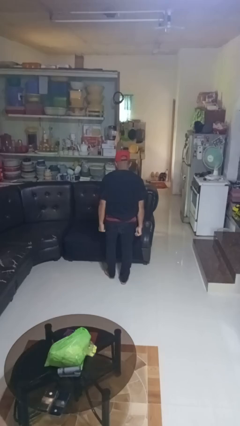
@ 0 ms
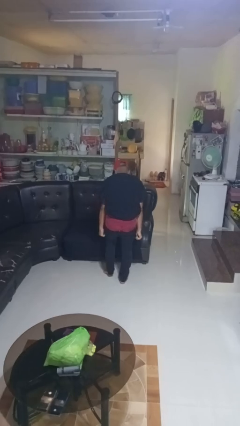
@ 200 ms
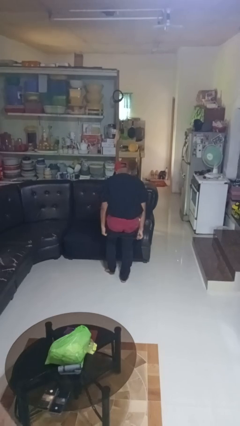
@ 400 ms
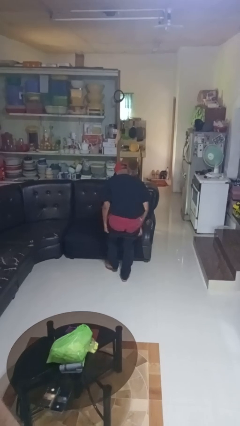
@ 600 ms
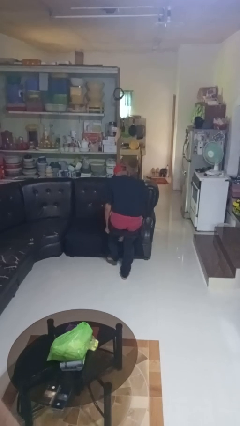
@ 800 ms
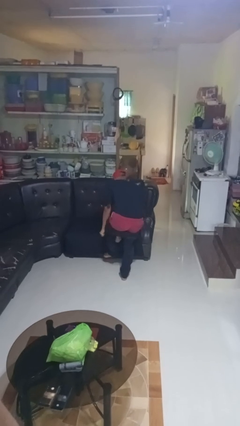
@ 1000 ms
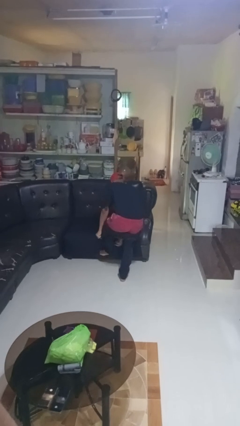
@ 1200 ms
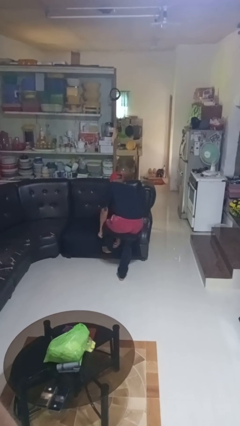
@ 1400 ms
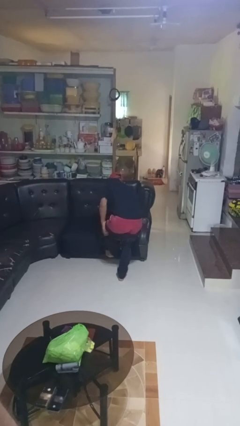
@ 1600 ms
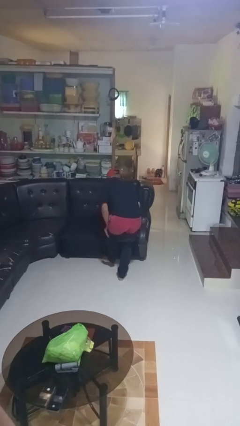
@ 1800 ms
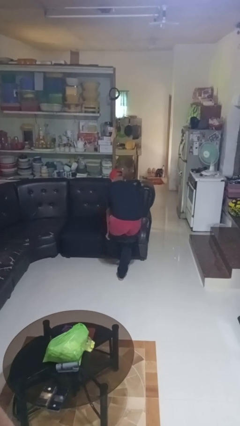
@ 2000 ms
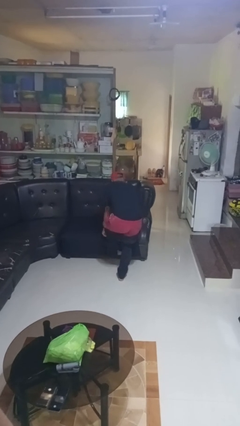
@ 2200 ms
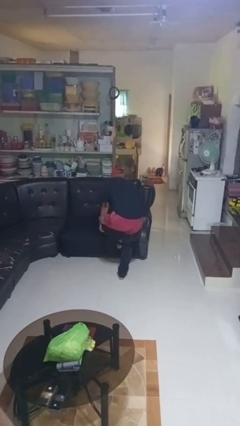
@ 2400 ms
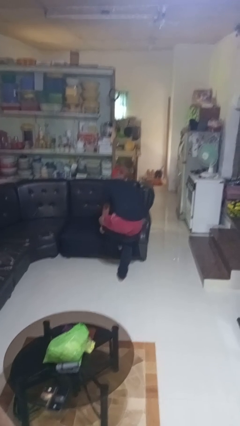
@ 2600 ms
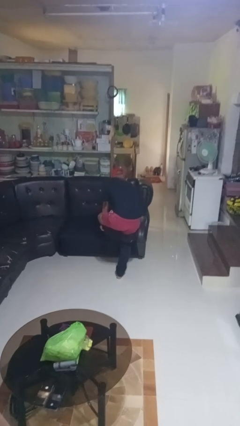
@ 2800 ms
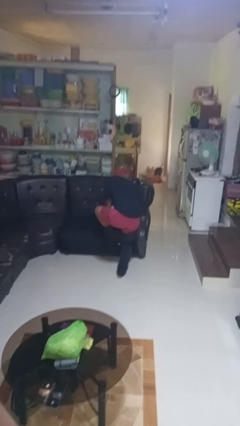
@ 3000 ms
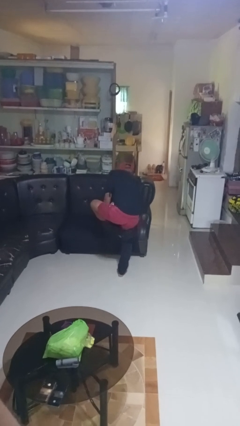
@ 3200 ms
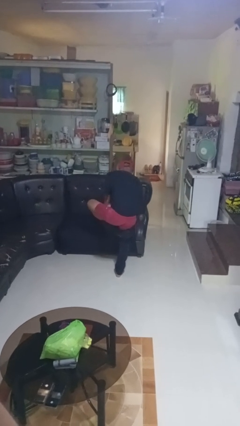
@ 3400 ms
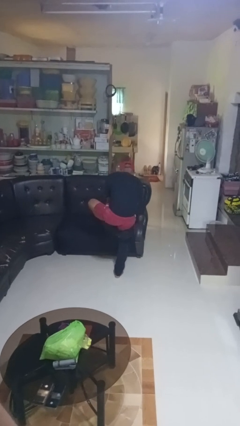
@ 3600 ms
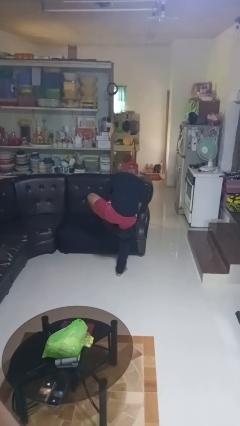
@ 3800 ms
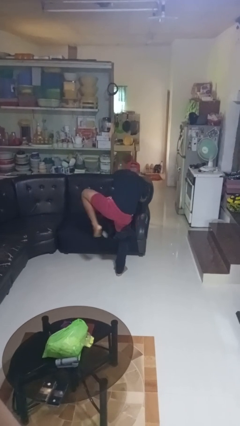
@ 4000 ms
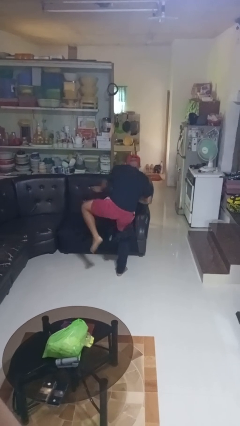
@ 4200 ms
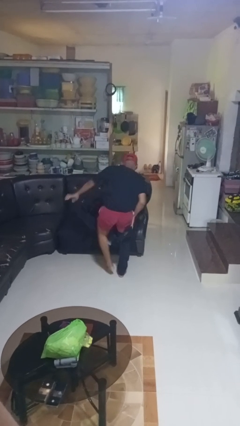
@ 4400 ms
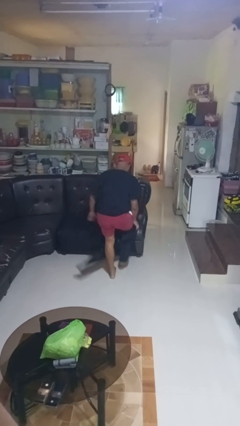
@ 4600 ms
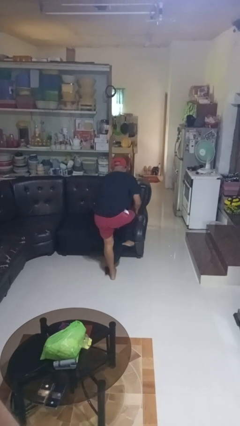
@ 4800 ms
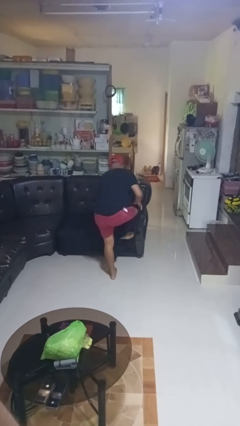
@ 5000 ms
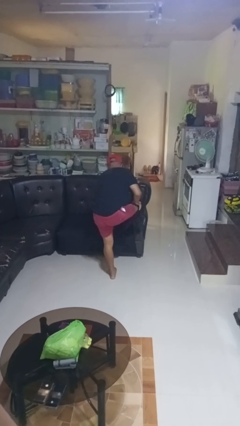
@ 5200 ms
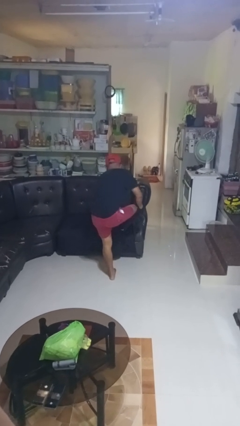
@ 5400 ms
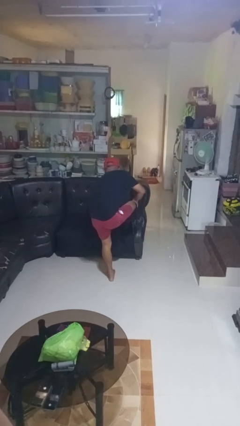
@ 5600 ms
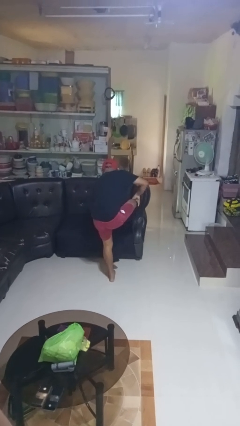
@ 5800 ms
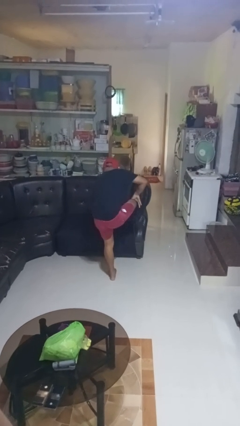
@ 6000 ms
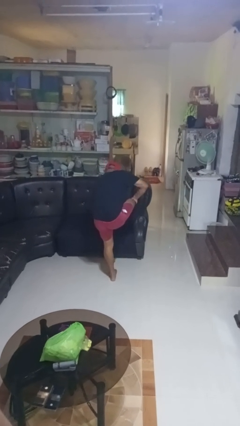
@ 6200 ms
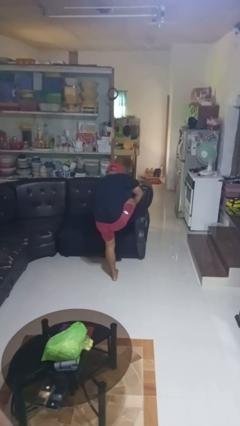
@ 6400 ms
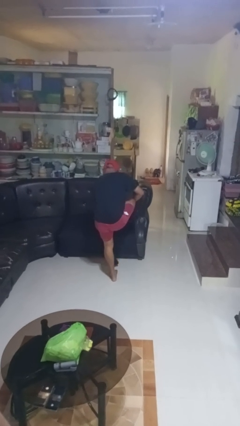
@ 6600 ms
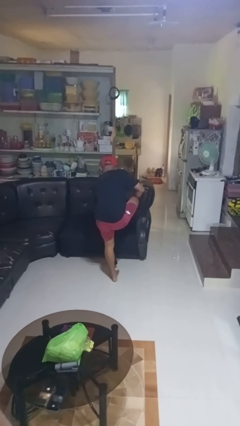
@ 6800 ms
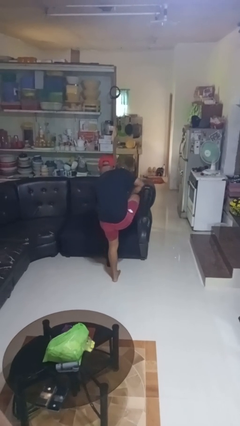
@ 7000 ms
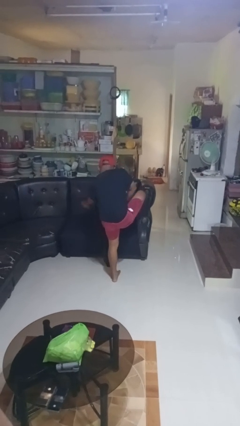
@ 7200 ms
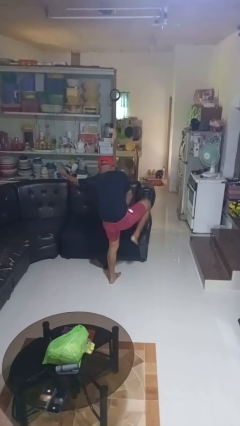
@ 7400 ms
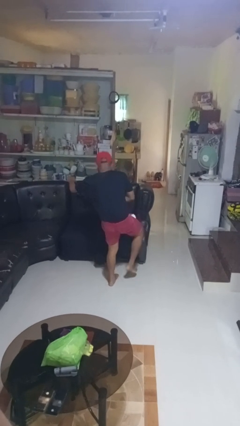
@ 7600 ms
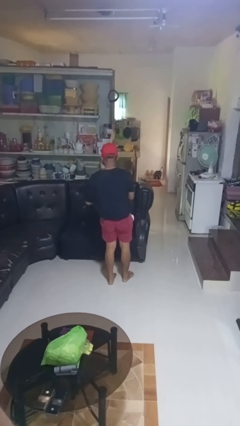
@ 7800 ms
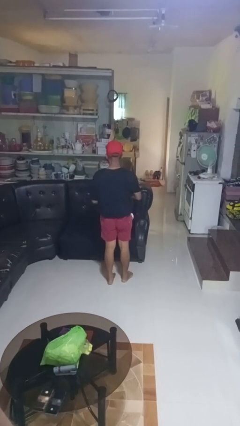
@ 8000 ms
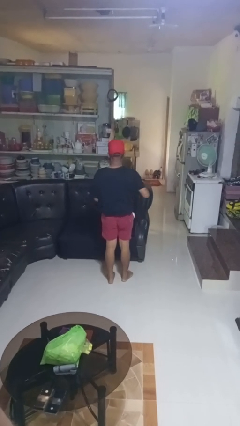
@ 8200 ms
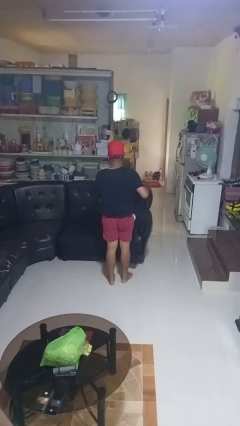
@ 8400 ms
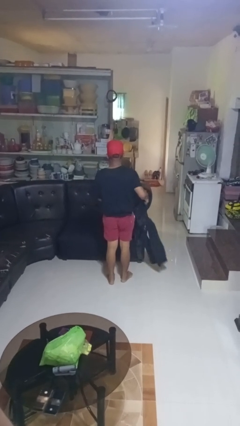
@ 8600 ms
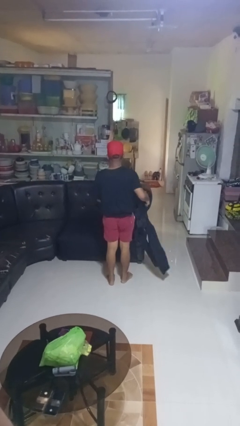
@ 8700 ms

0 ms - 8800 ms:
person takes off pants

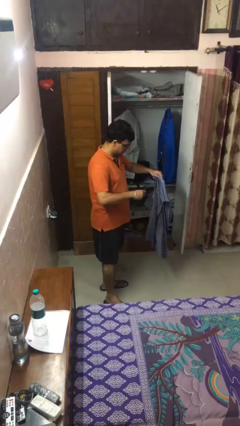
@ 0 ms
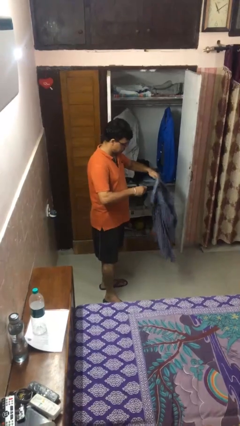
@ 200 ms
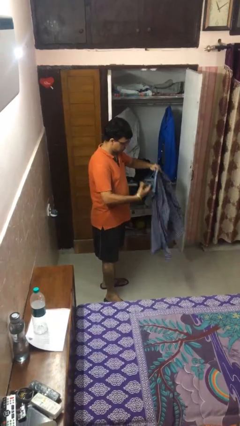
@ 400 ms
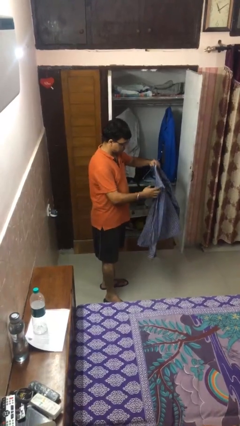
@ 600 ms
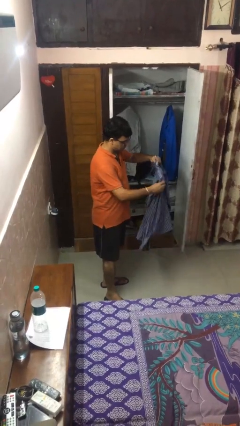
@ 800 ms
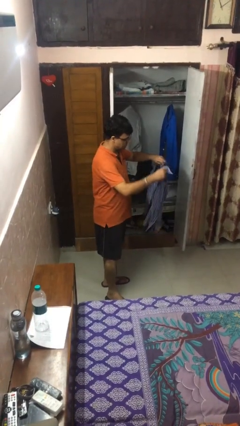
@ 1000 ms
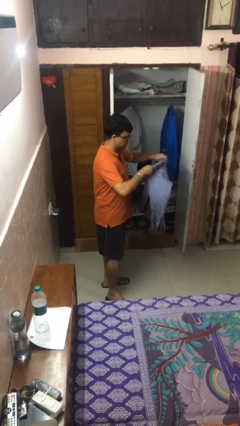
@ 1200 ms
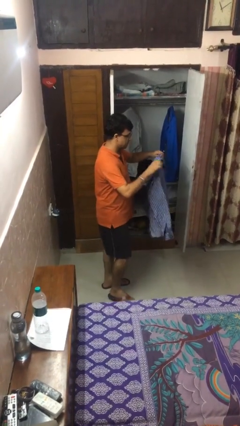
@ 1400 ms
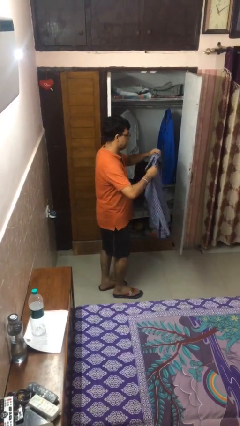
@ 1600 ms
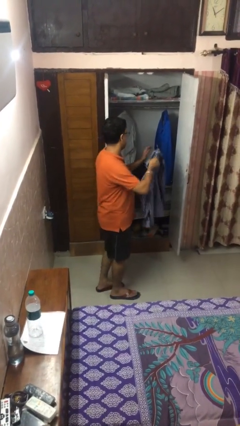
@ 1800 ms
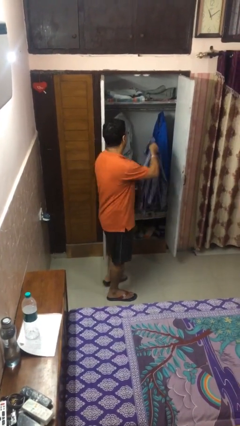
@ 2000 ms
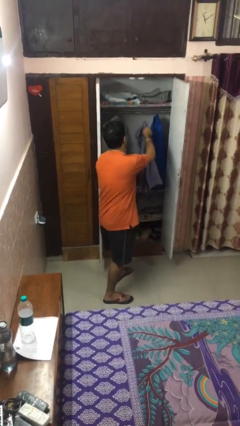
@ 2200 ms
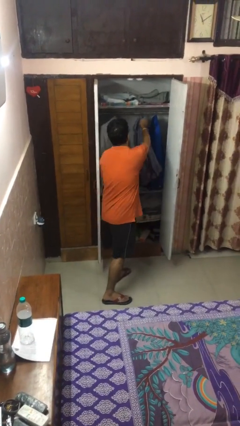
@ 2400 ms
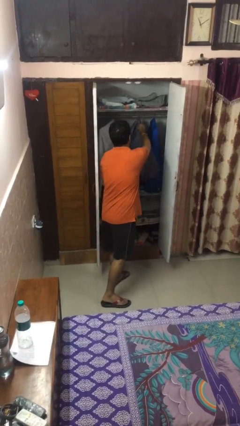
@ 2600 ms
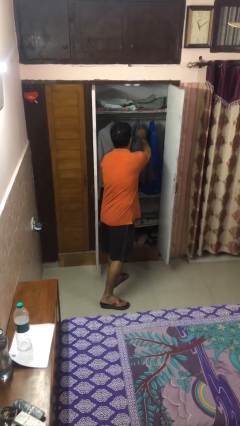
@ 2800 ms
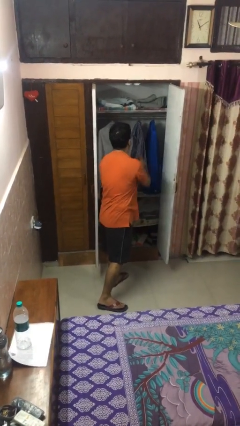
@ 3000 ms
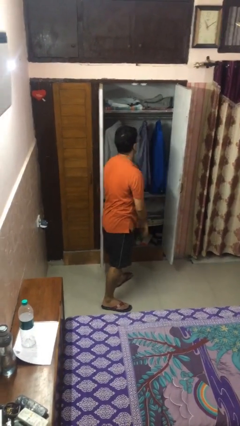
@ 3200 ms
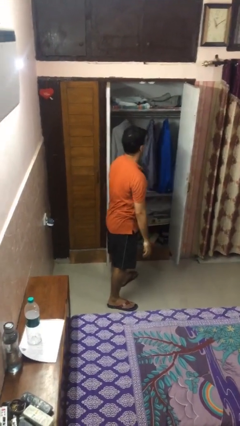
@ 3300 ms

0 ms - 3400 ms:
person puts clothes into closet

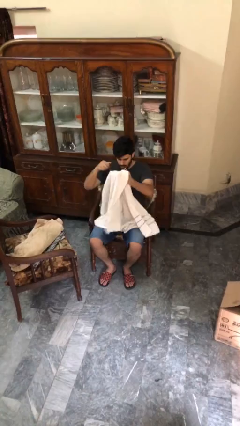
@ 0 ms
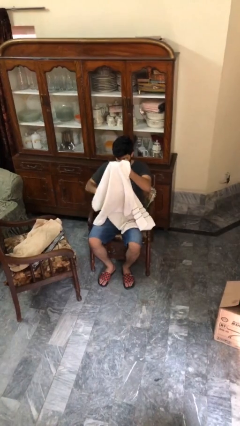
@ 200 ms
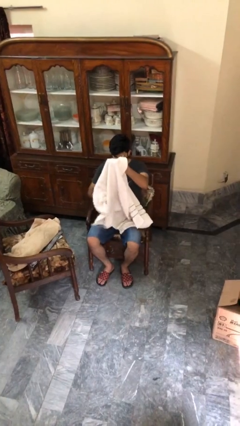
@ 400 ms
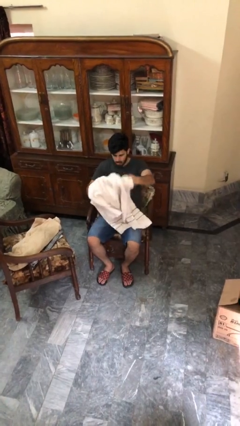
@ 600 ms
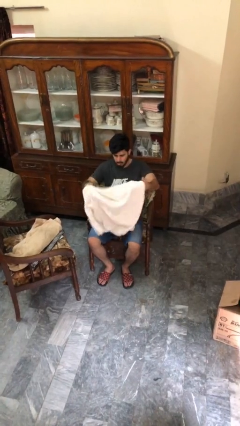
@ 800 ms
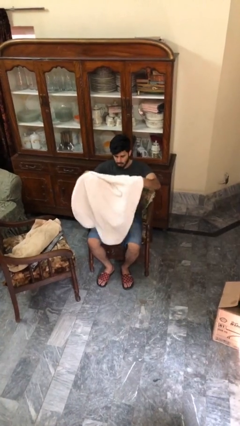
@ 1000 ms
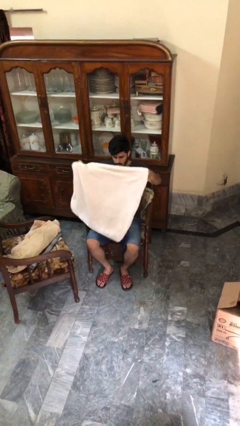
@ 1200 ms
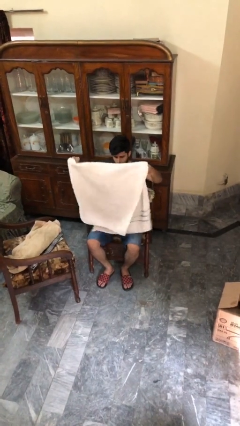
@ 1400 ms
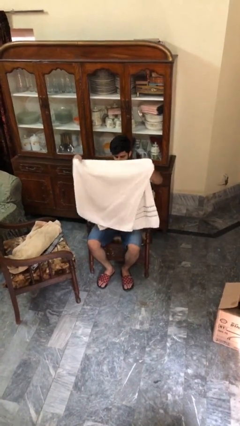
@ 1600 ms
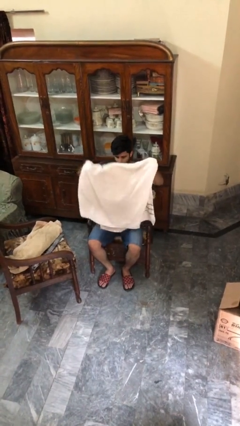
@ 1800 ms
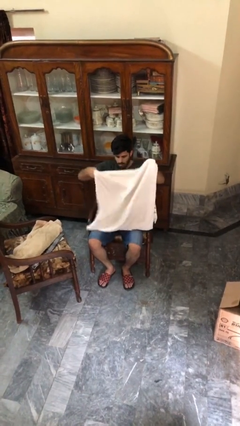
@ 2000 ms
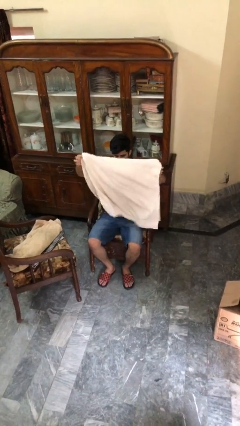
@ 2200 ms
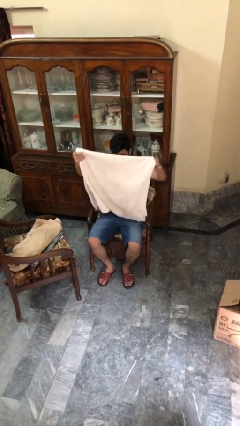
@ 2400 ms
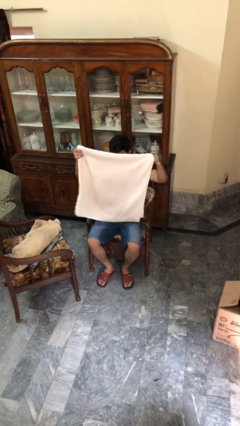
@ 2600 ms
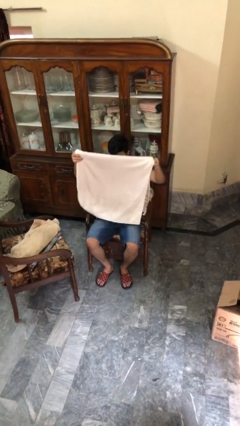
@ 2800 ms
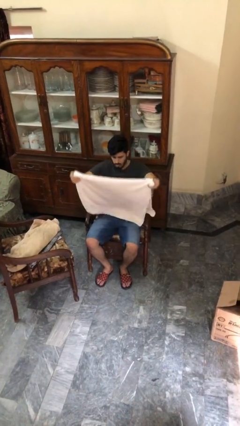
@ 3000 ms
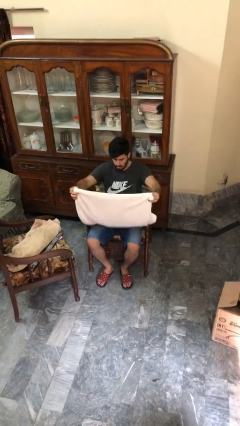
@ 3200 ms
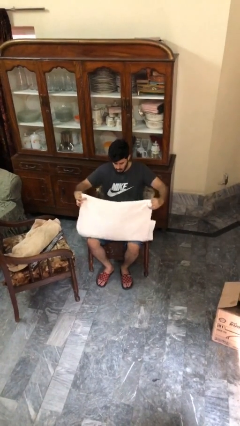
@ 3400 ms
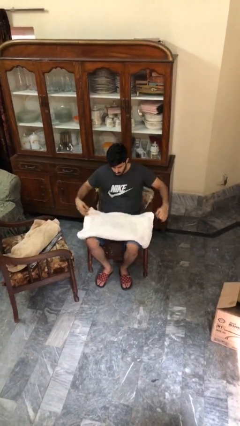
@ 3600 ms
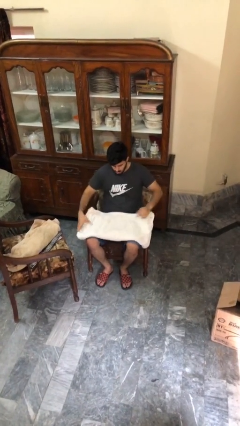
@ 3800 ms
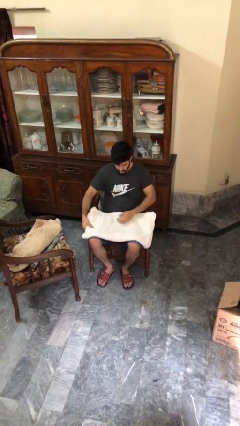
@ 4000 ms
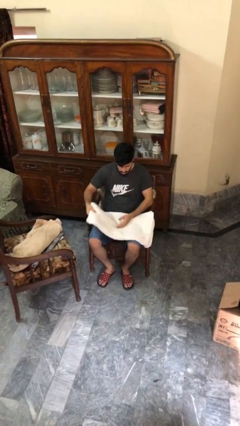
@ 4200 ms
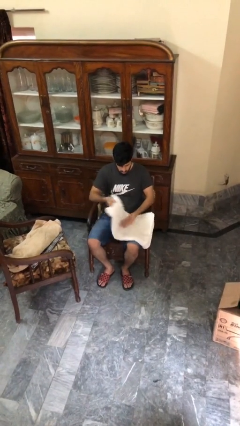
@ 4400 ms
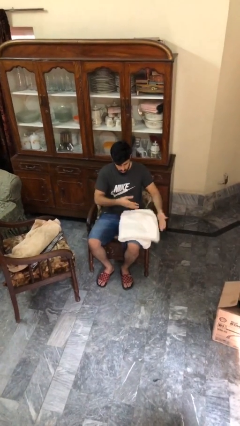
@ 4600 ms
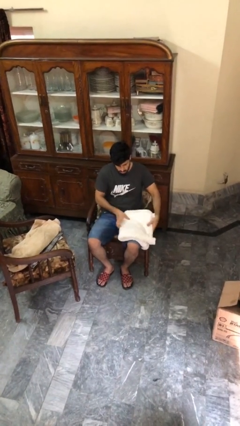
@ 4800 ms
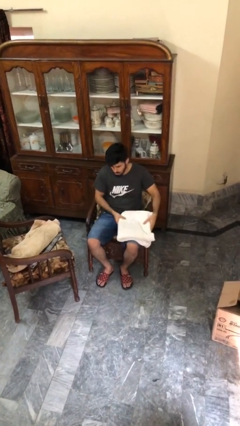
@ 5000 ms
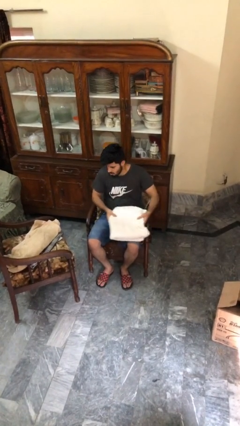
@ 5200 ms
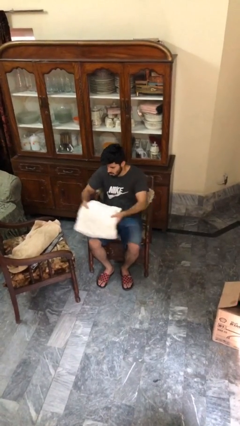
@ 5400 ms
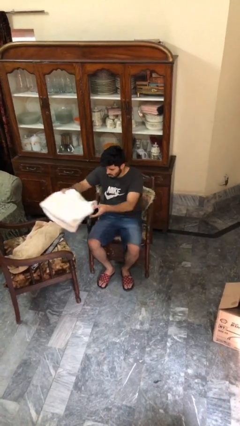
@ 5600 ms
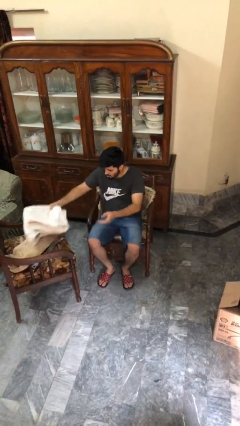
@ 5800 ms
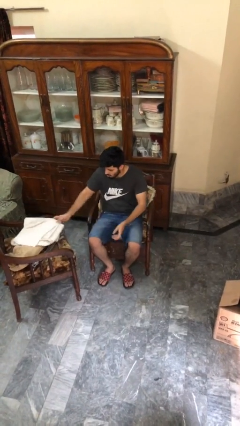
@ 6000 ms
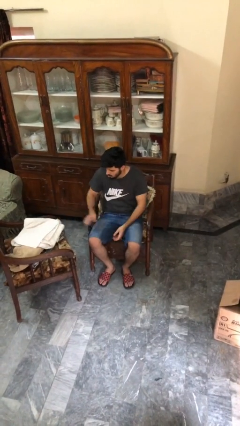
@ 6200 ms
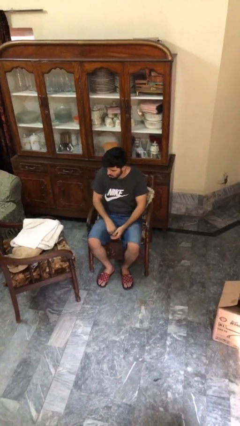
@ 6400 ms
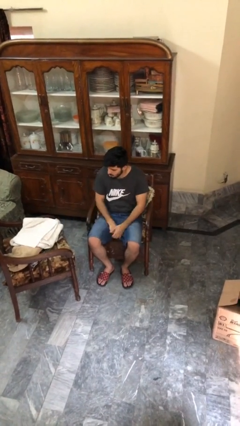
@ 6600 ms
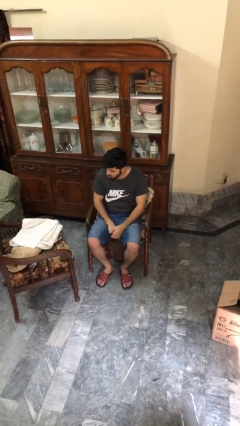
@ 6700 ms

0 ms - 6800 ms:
person folds towel
